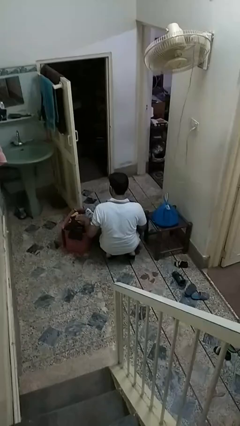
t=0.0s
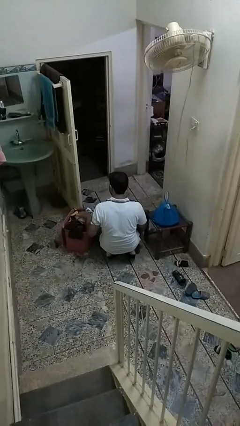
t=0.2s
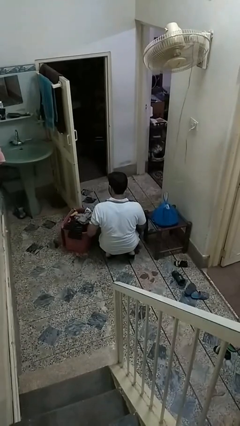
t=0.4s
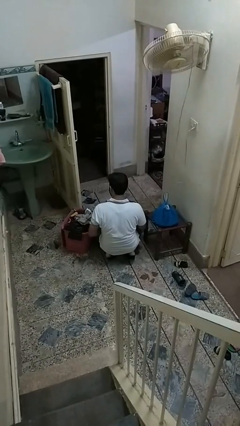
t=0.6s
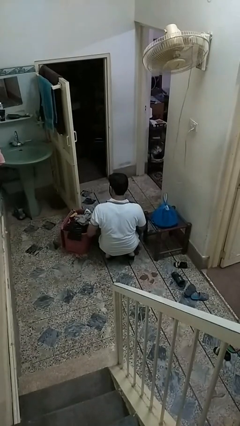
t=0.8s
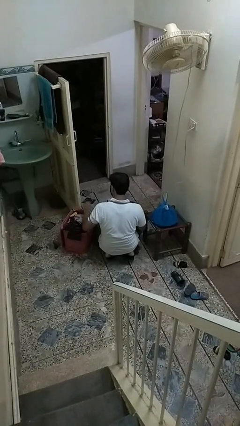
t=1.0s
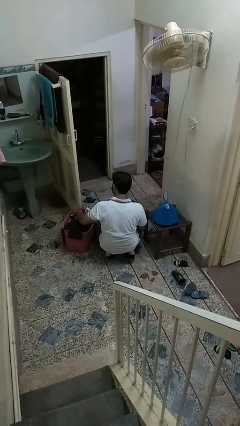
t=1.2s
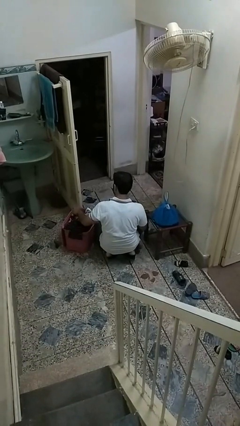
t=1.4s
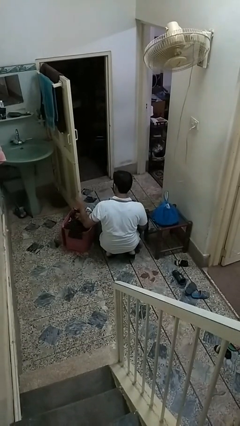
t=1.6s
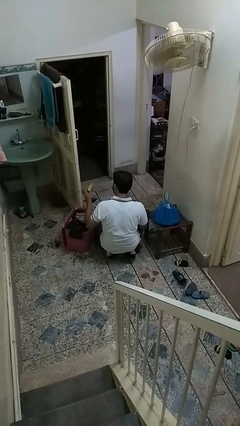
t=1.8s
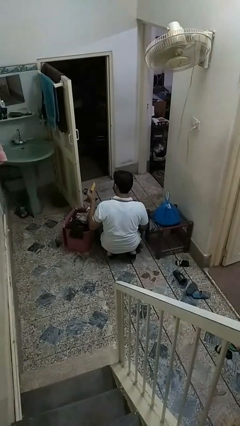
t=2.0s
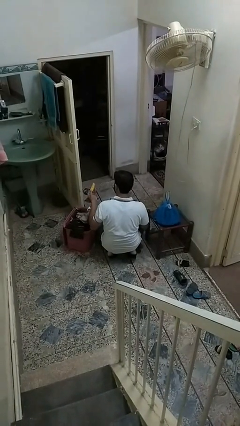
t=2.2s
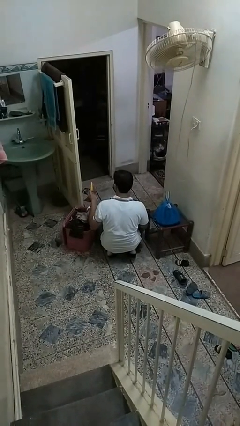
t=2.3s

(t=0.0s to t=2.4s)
person takes object from basket

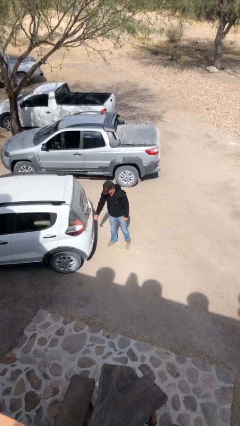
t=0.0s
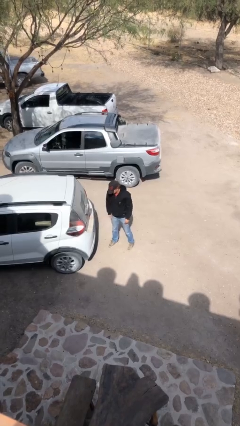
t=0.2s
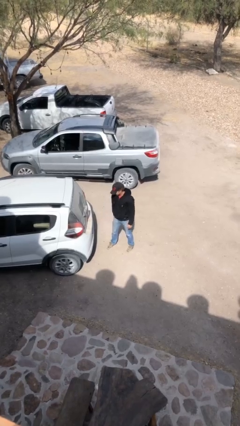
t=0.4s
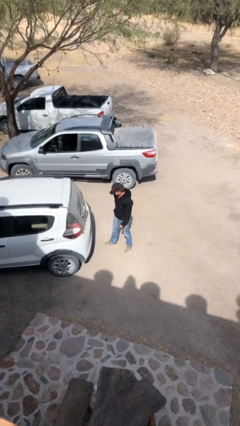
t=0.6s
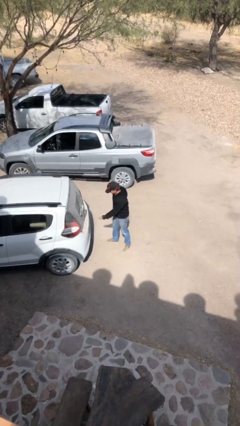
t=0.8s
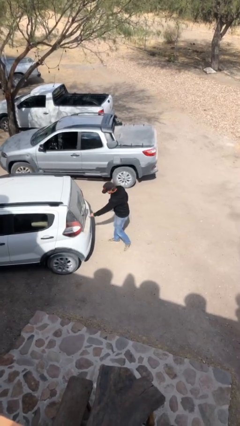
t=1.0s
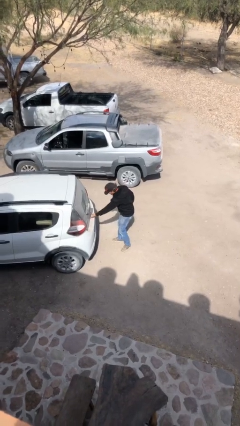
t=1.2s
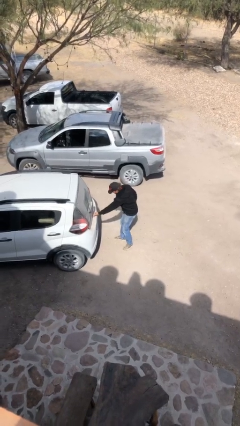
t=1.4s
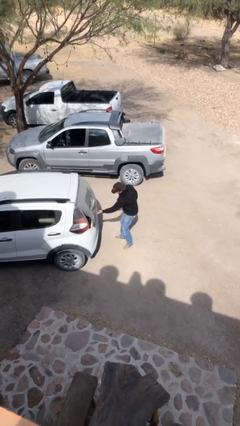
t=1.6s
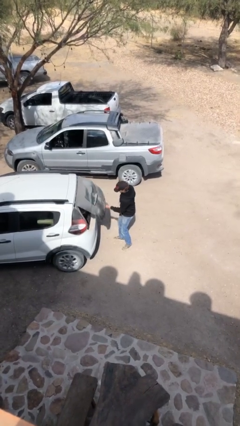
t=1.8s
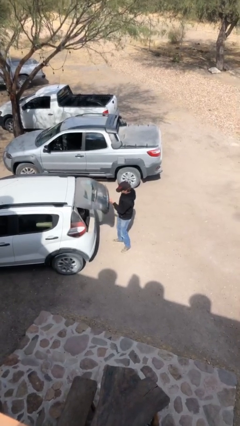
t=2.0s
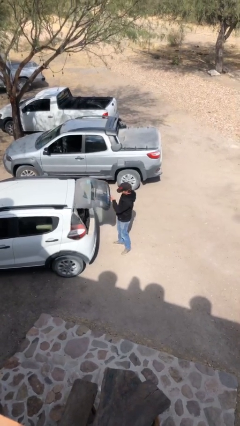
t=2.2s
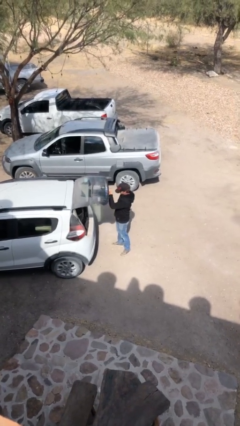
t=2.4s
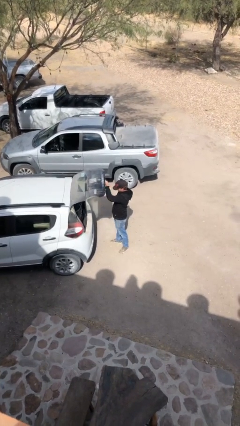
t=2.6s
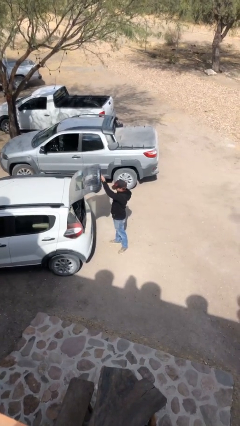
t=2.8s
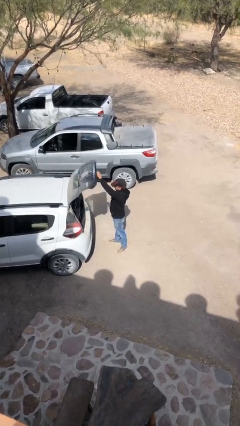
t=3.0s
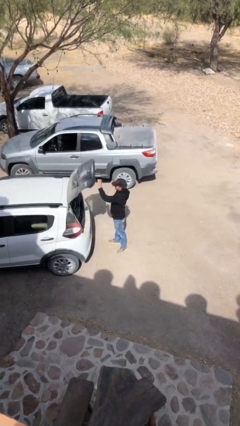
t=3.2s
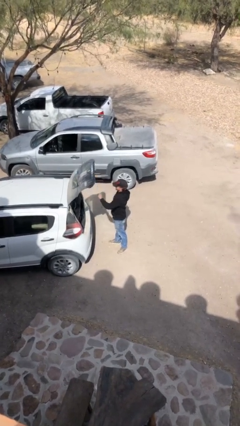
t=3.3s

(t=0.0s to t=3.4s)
person opens car trunk

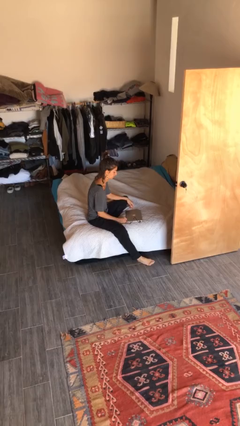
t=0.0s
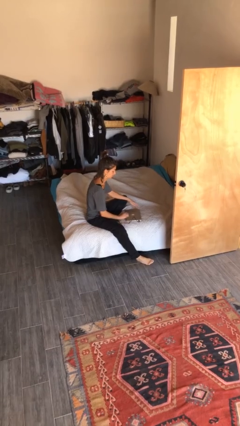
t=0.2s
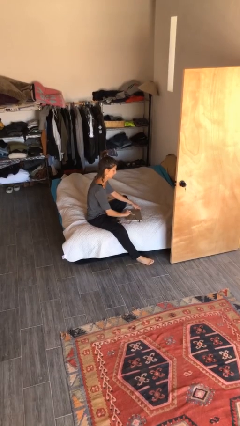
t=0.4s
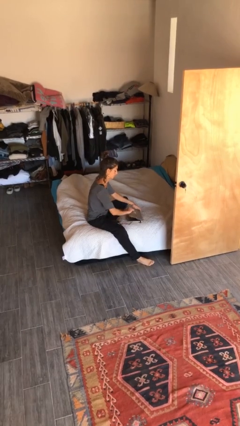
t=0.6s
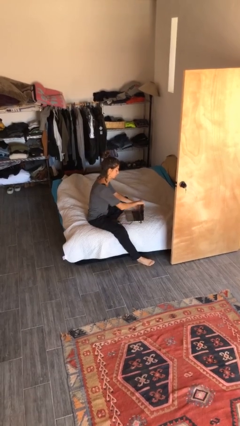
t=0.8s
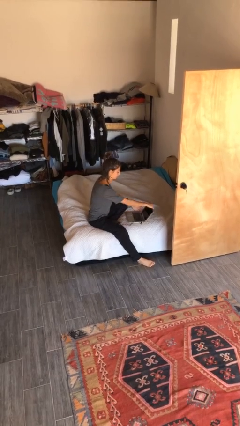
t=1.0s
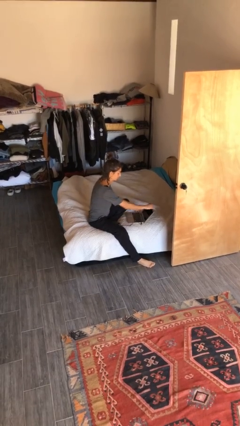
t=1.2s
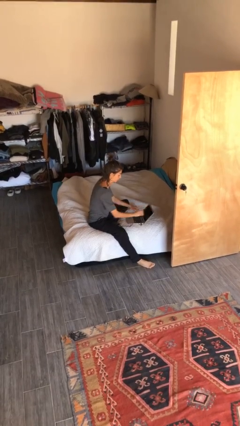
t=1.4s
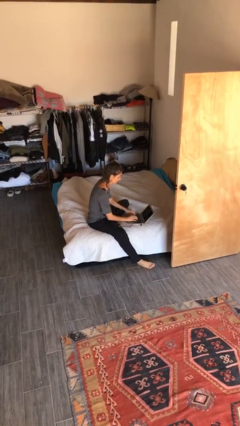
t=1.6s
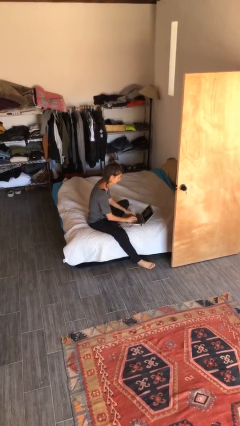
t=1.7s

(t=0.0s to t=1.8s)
person interacts with laptop

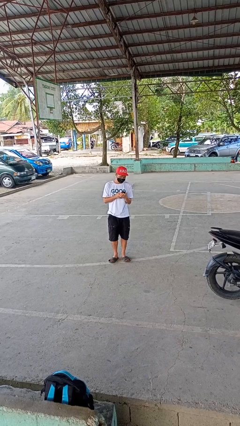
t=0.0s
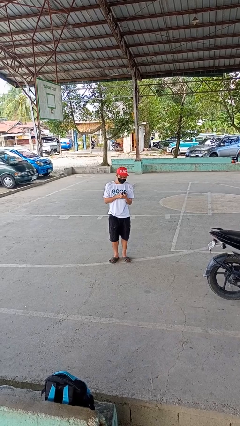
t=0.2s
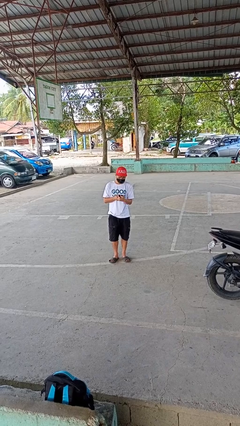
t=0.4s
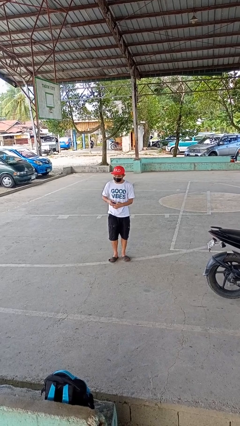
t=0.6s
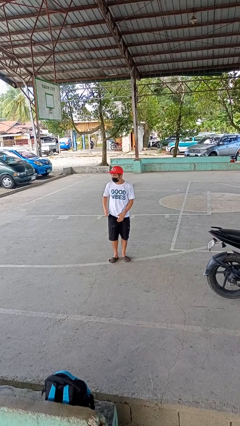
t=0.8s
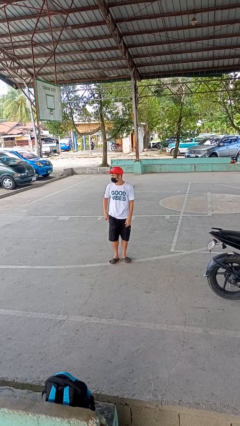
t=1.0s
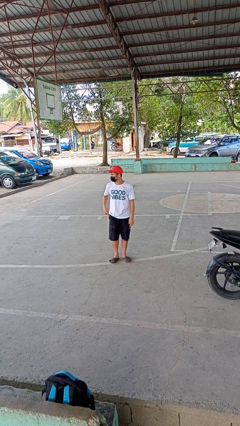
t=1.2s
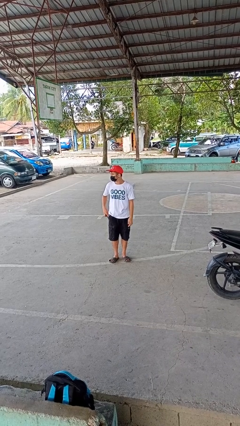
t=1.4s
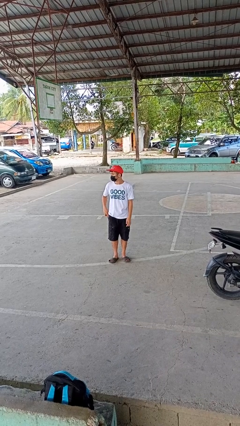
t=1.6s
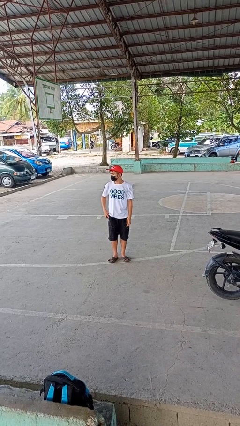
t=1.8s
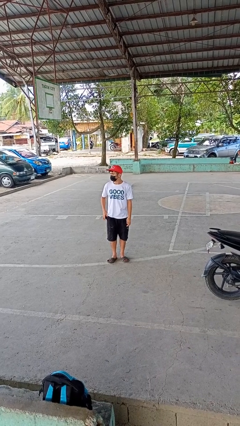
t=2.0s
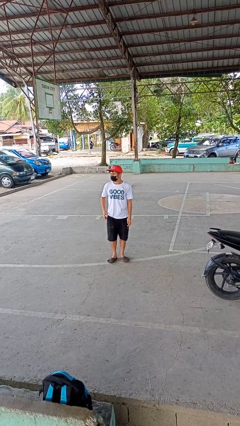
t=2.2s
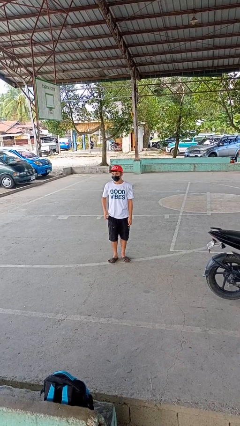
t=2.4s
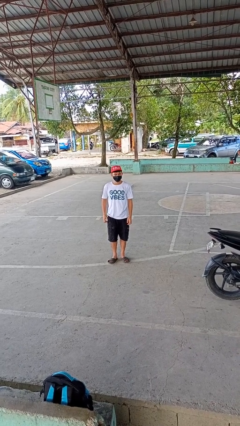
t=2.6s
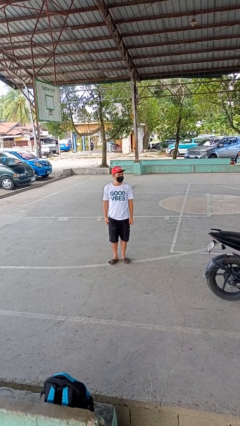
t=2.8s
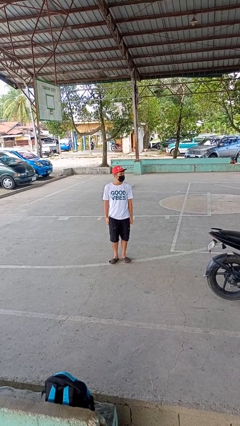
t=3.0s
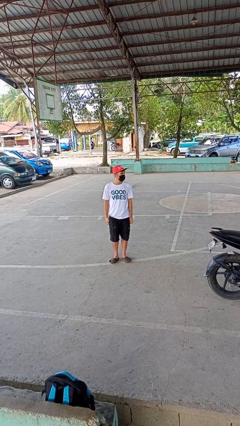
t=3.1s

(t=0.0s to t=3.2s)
person puts phone into pocket

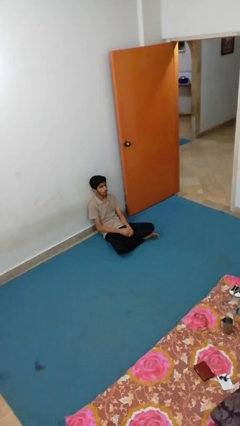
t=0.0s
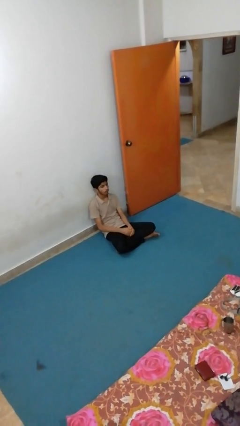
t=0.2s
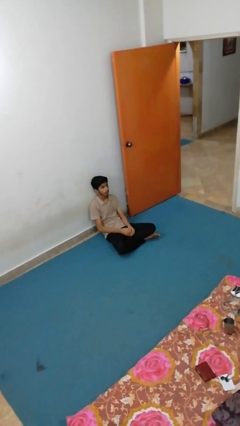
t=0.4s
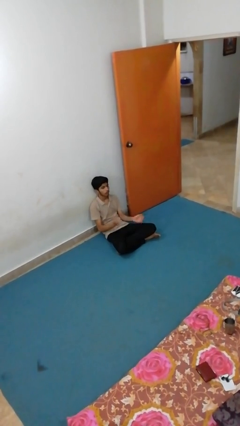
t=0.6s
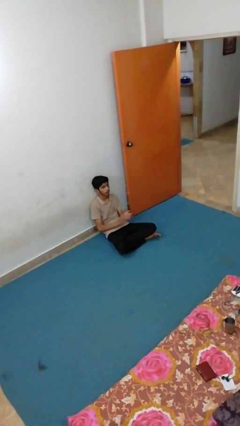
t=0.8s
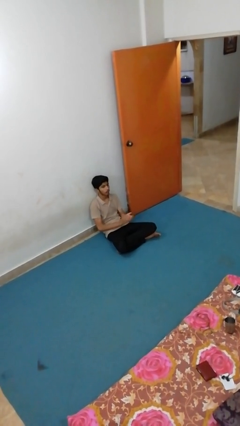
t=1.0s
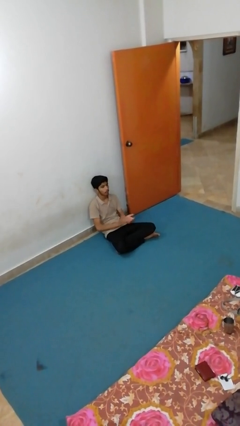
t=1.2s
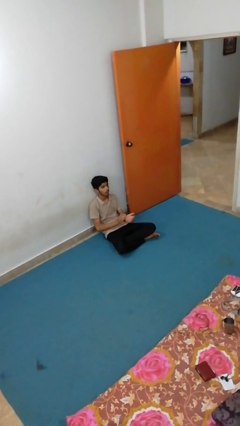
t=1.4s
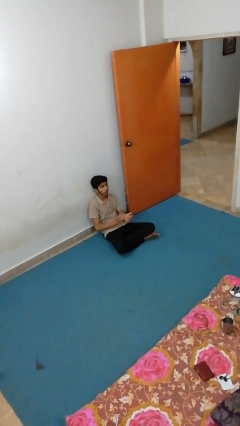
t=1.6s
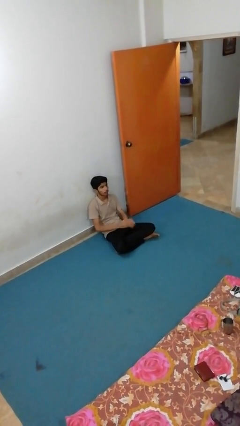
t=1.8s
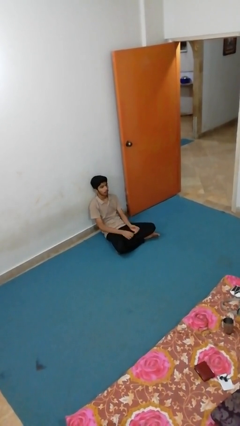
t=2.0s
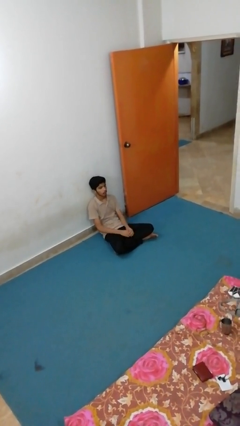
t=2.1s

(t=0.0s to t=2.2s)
person claps hands

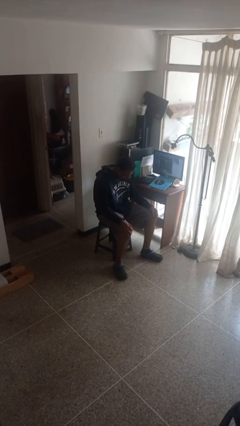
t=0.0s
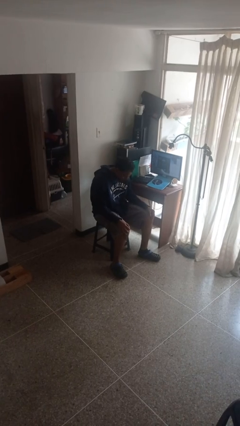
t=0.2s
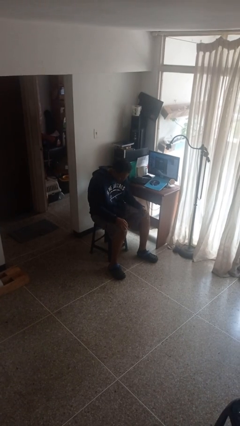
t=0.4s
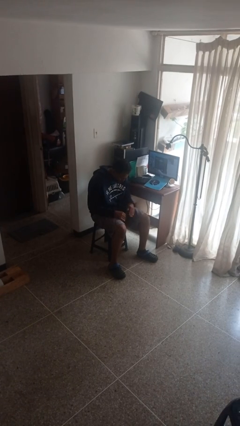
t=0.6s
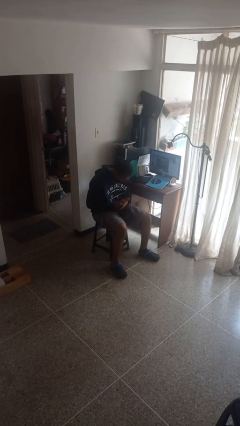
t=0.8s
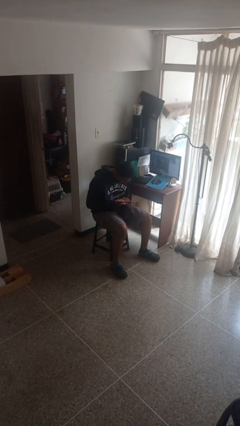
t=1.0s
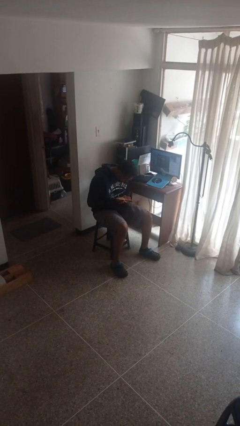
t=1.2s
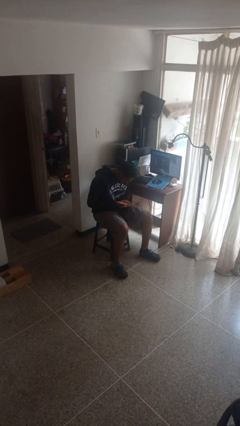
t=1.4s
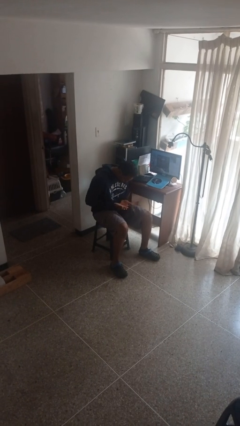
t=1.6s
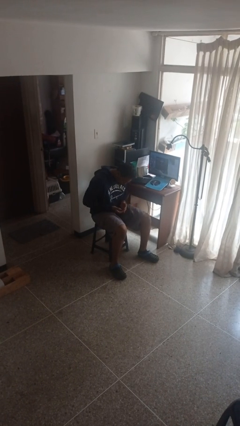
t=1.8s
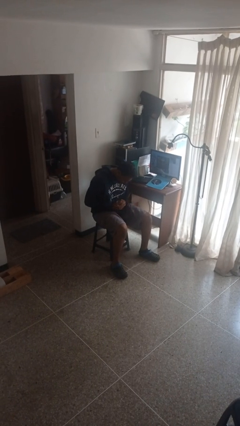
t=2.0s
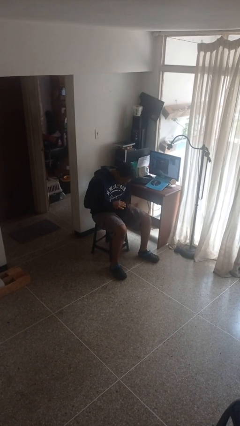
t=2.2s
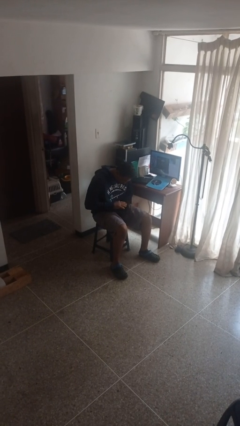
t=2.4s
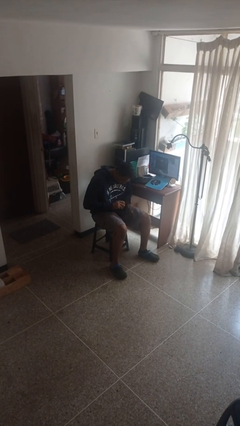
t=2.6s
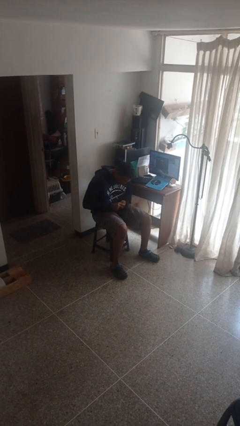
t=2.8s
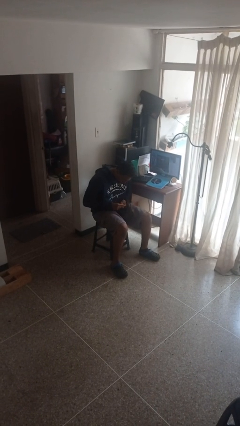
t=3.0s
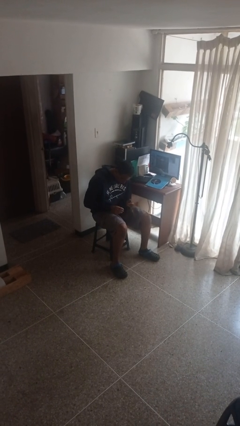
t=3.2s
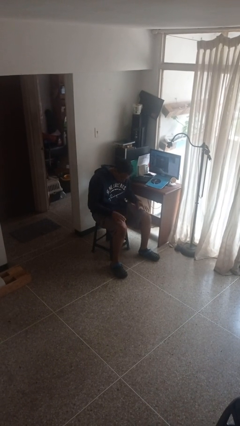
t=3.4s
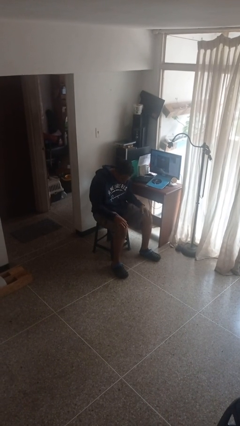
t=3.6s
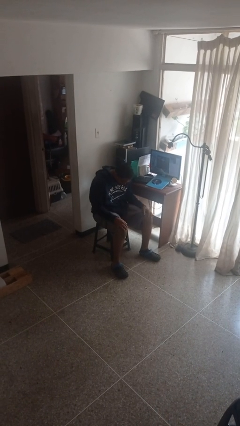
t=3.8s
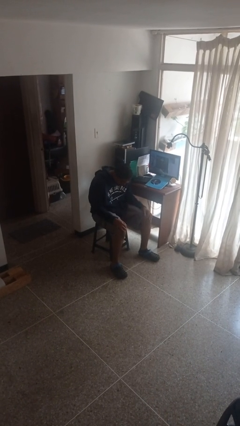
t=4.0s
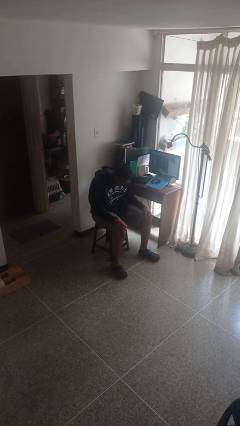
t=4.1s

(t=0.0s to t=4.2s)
person looks at hands in lap

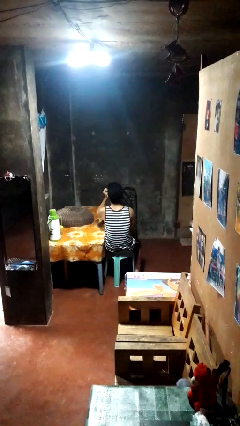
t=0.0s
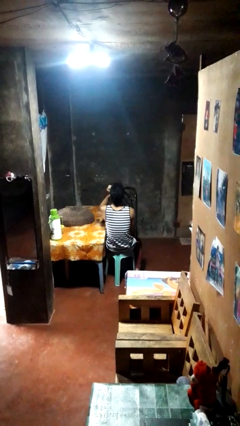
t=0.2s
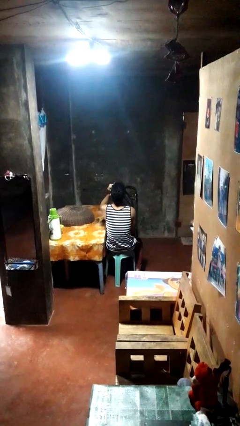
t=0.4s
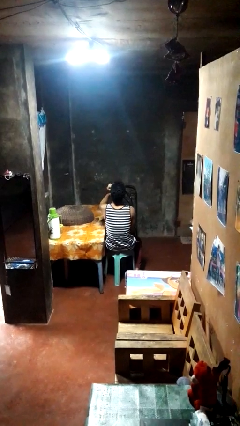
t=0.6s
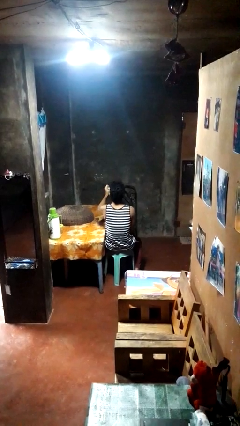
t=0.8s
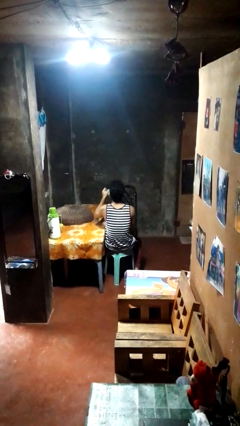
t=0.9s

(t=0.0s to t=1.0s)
person drinks from mug
